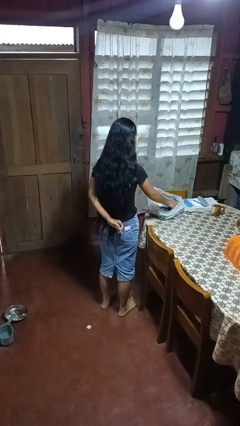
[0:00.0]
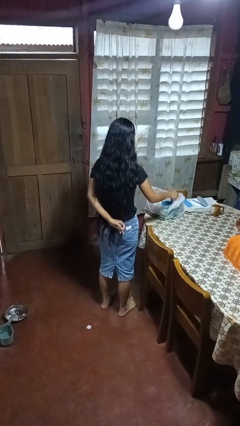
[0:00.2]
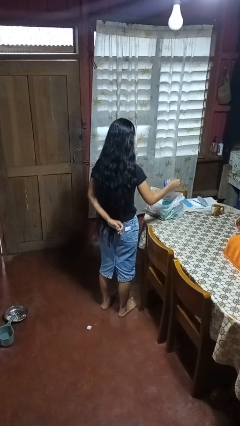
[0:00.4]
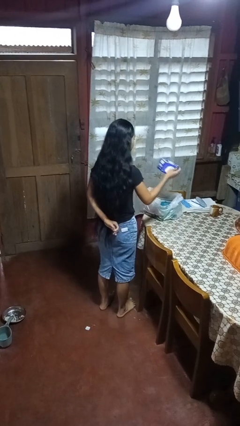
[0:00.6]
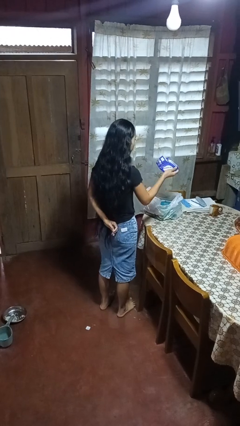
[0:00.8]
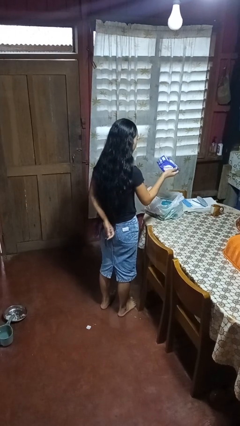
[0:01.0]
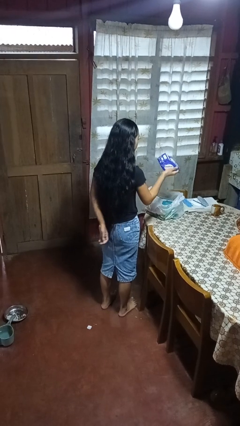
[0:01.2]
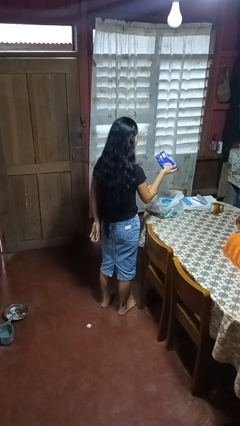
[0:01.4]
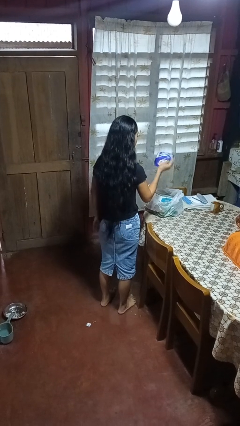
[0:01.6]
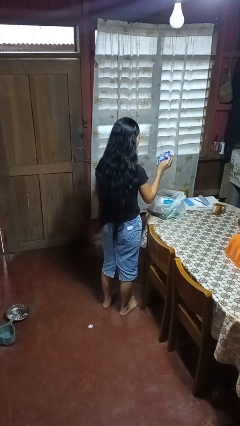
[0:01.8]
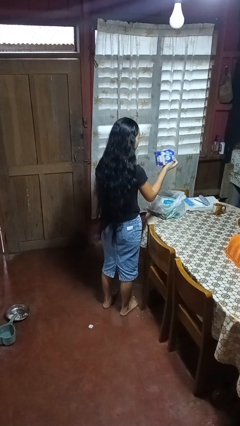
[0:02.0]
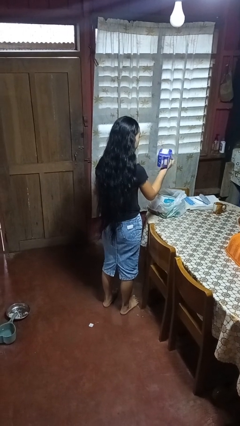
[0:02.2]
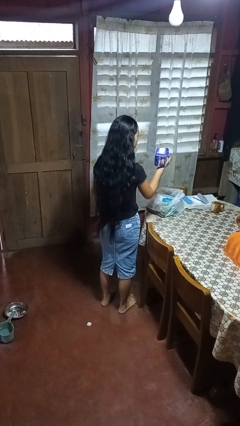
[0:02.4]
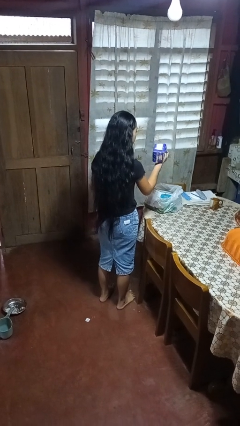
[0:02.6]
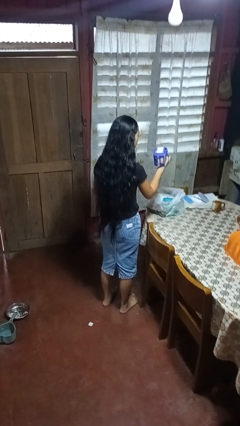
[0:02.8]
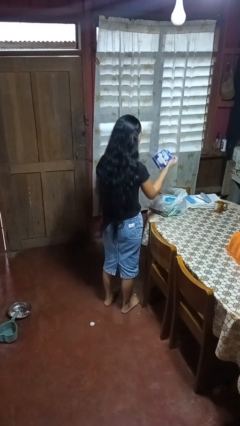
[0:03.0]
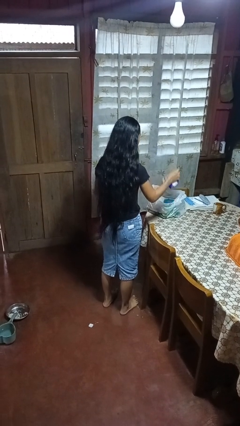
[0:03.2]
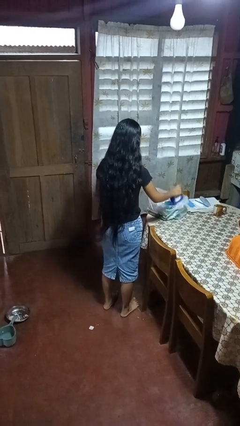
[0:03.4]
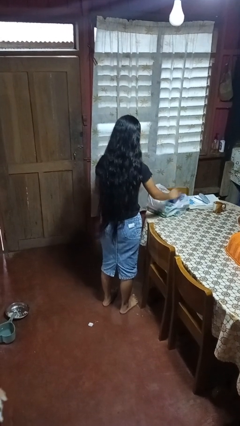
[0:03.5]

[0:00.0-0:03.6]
person takes object from bag

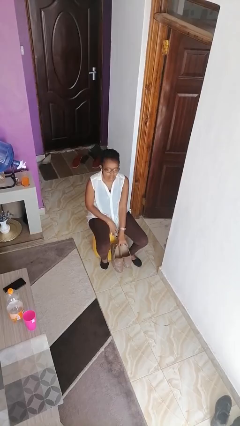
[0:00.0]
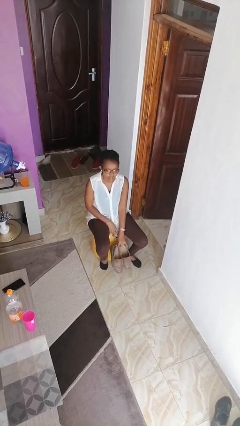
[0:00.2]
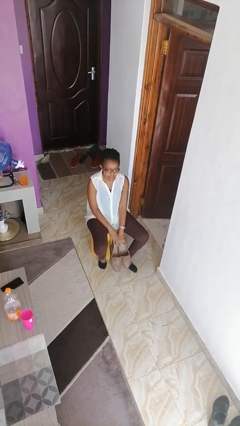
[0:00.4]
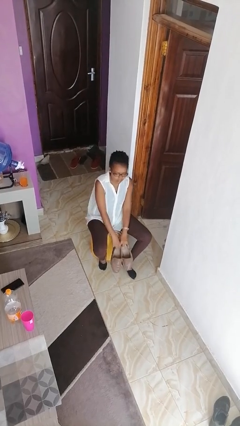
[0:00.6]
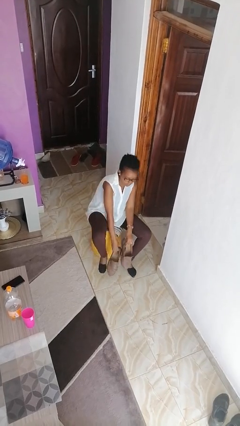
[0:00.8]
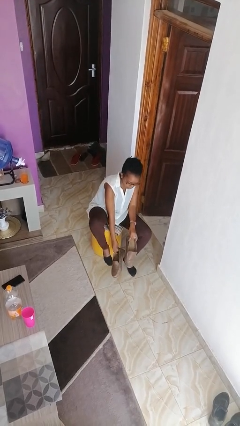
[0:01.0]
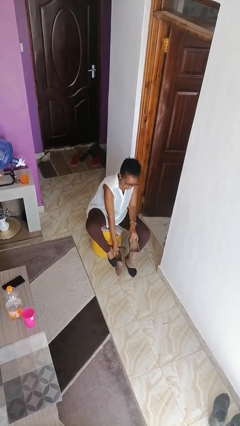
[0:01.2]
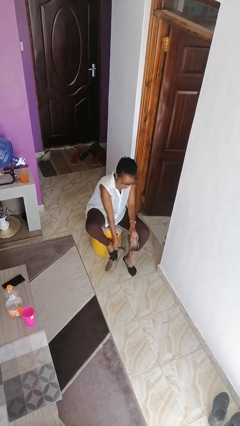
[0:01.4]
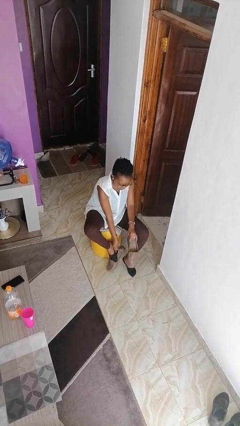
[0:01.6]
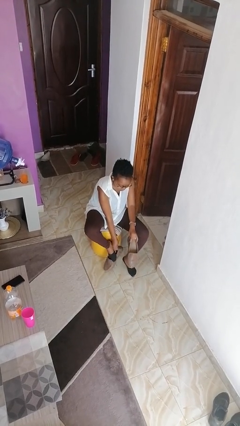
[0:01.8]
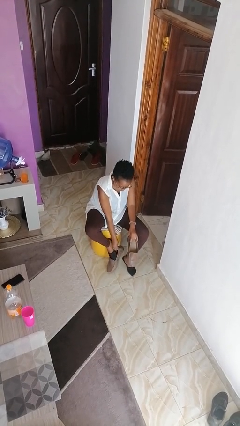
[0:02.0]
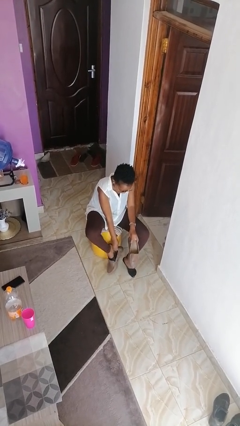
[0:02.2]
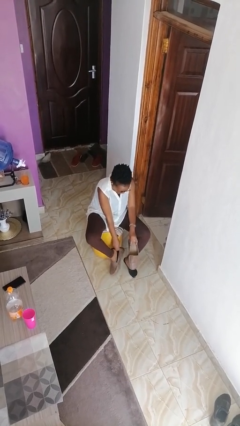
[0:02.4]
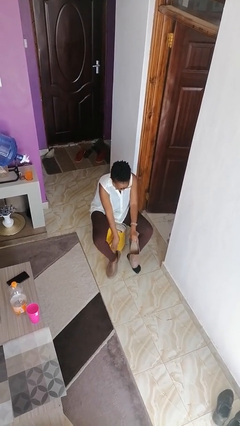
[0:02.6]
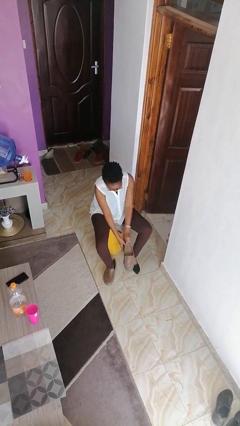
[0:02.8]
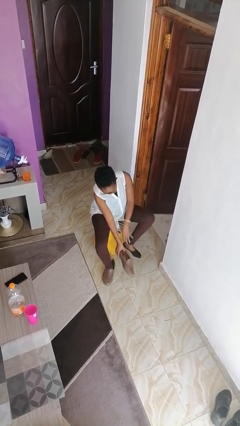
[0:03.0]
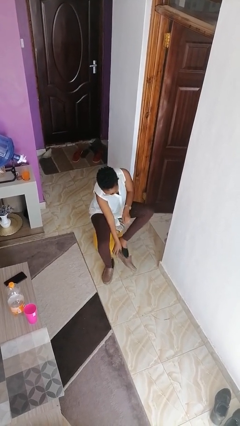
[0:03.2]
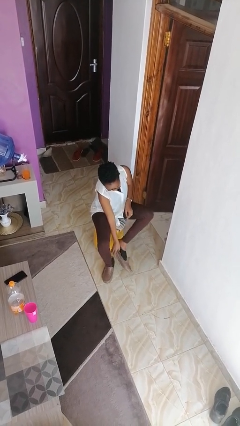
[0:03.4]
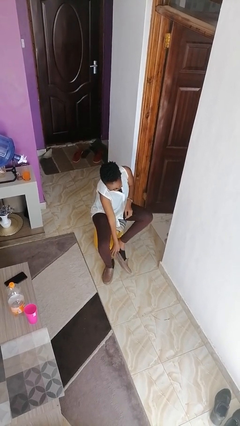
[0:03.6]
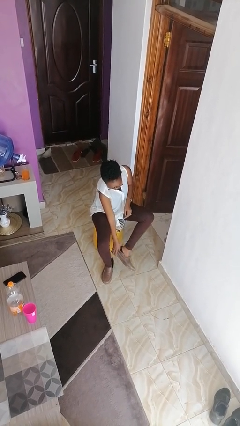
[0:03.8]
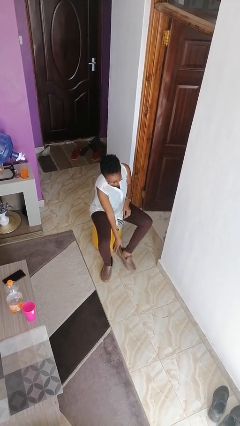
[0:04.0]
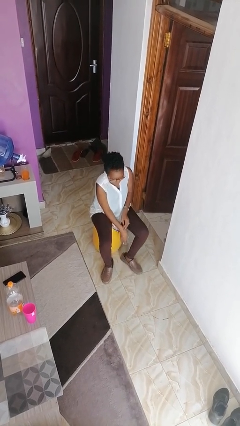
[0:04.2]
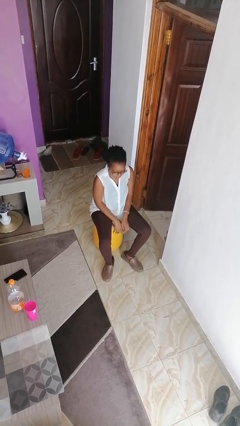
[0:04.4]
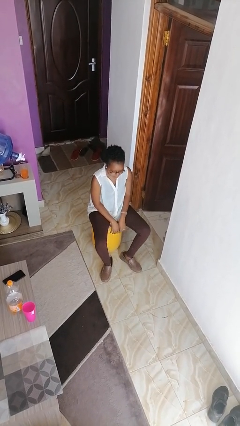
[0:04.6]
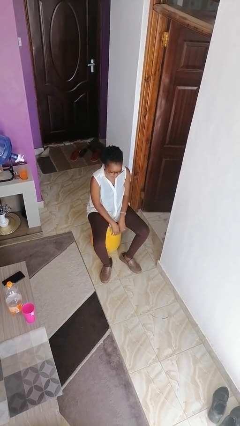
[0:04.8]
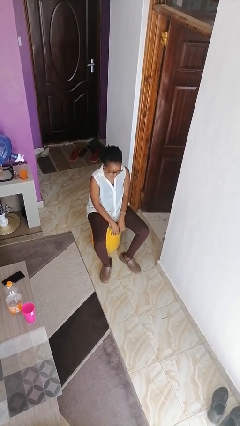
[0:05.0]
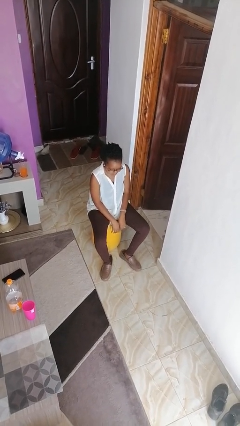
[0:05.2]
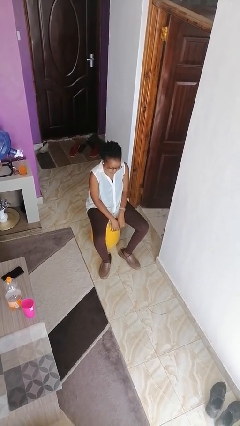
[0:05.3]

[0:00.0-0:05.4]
person puts on shoes

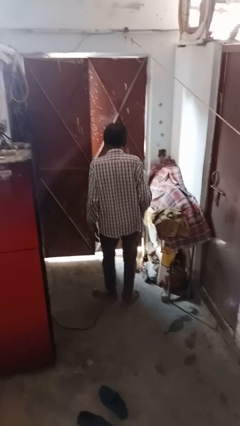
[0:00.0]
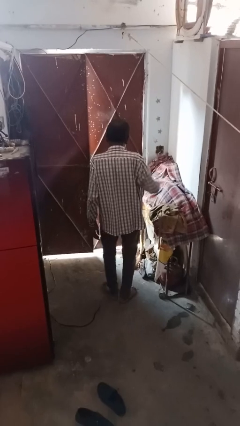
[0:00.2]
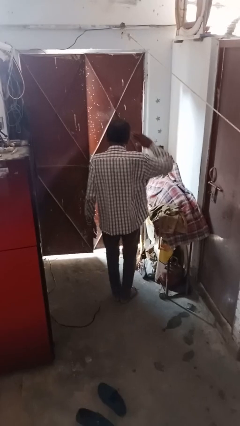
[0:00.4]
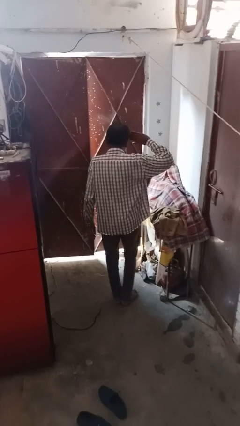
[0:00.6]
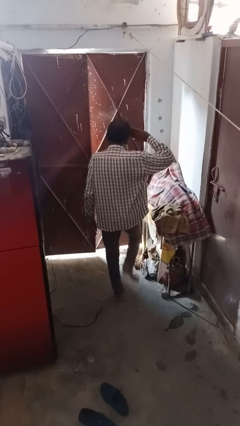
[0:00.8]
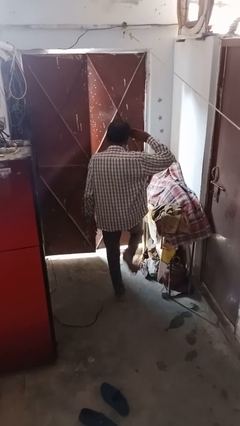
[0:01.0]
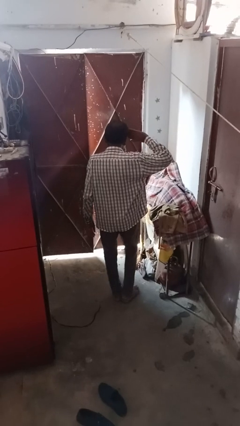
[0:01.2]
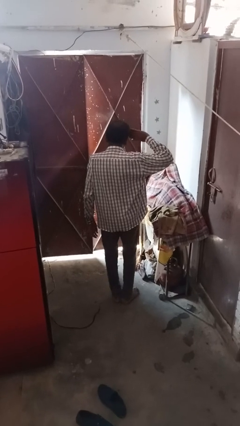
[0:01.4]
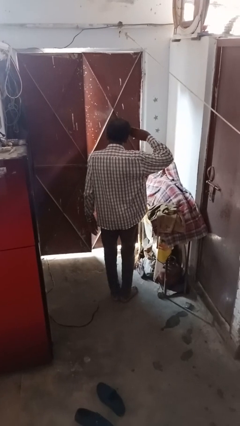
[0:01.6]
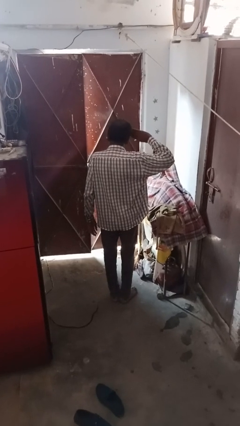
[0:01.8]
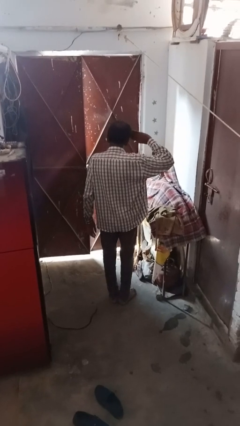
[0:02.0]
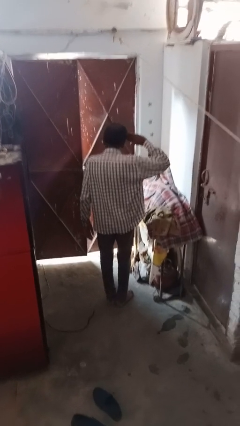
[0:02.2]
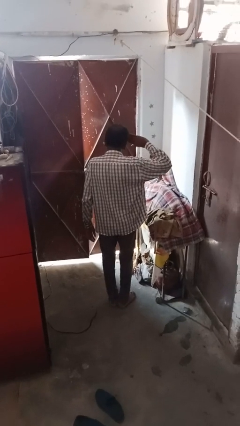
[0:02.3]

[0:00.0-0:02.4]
person salutes

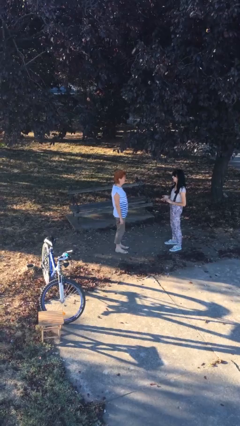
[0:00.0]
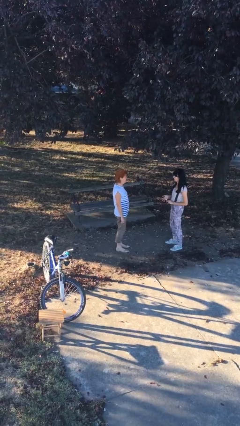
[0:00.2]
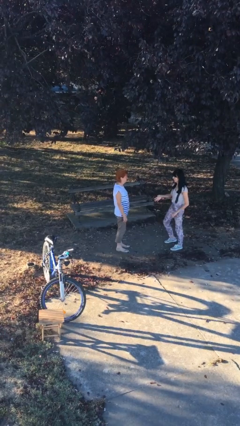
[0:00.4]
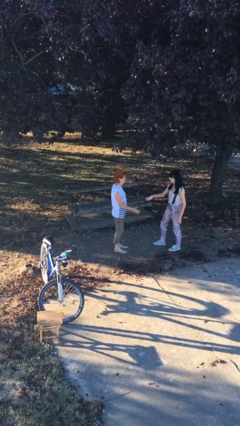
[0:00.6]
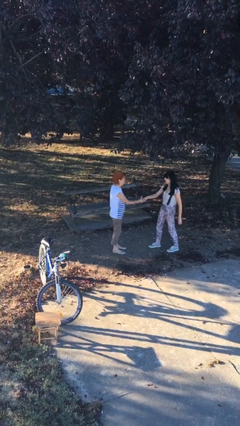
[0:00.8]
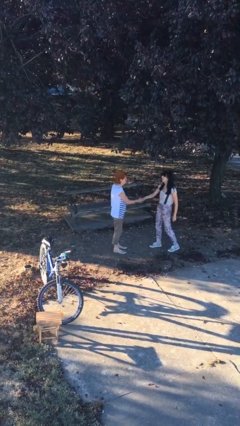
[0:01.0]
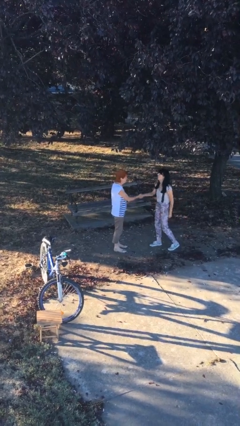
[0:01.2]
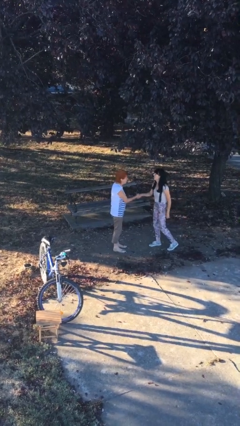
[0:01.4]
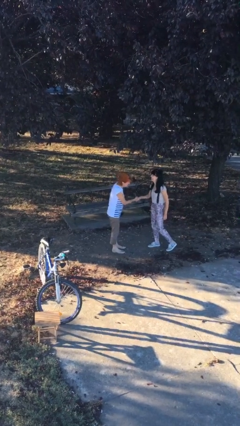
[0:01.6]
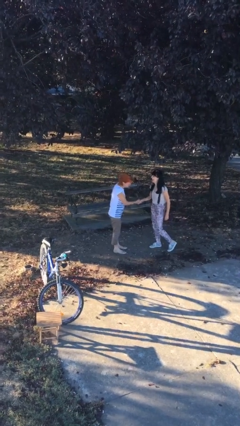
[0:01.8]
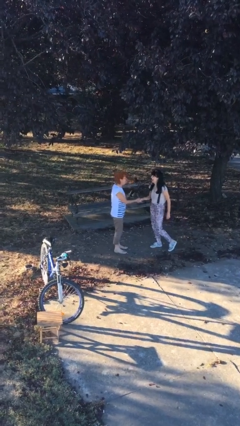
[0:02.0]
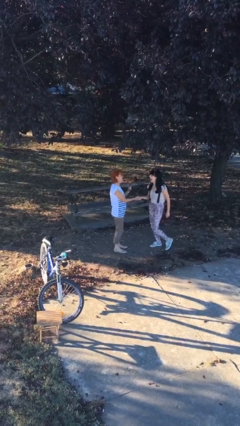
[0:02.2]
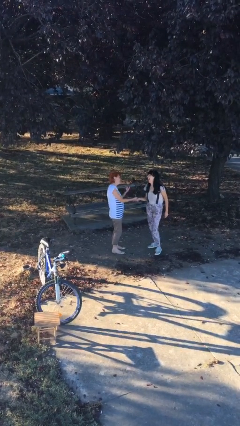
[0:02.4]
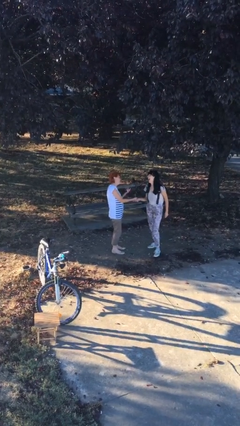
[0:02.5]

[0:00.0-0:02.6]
person shakes hand

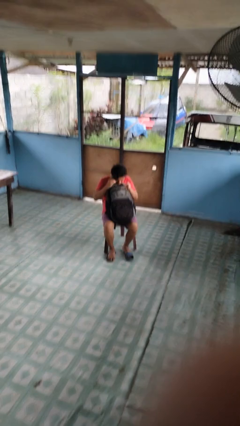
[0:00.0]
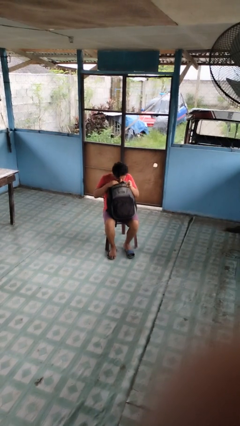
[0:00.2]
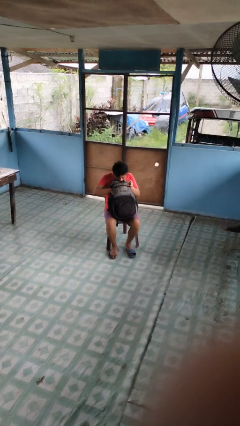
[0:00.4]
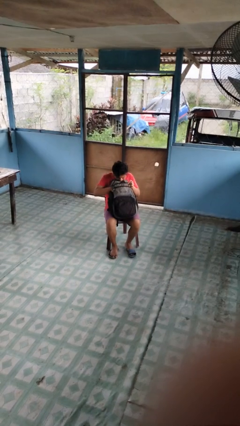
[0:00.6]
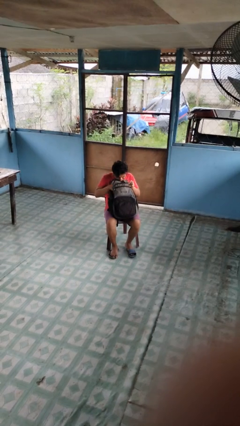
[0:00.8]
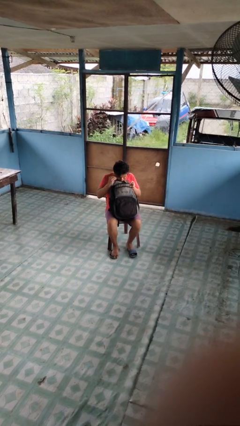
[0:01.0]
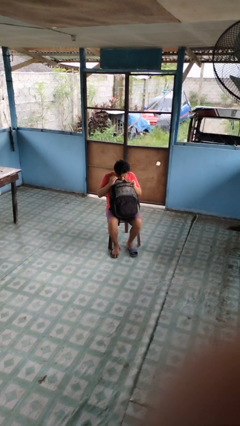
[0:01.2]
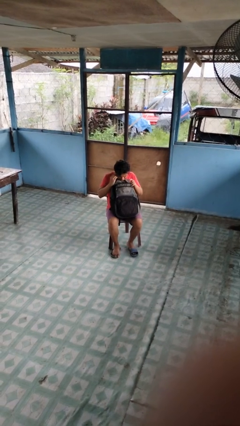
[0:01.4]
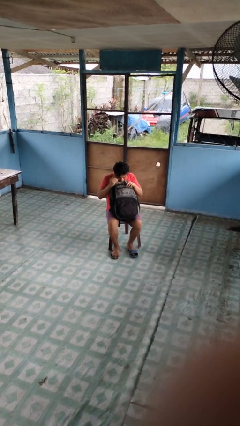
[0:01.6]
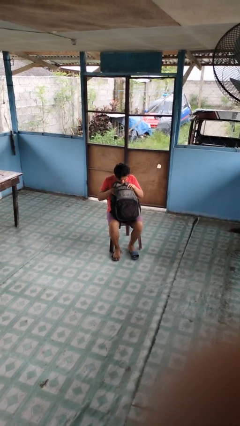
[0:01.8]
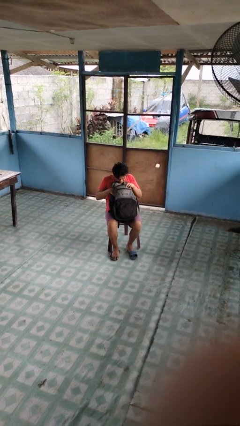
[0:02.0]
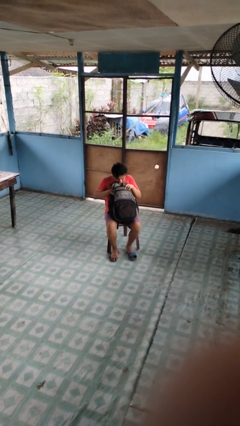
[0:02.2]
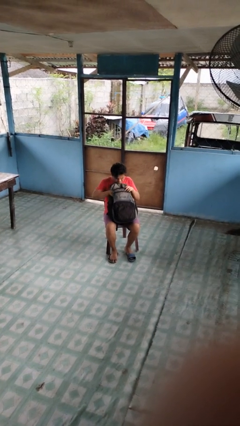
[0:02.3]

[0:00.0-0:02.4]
person searches in backpack

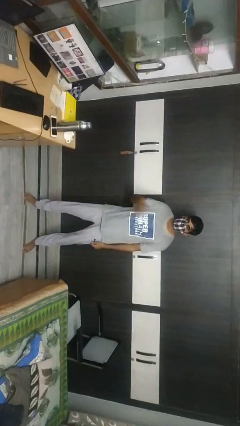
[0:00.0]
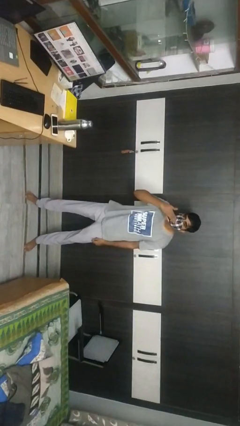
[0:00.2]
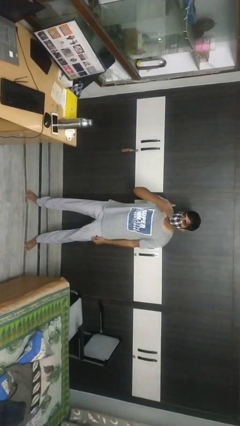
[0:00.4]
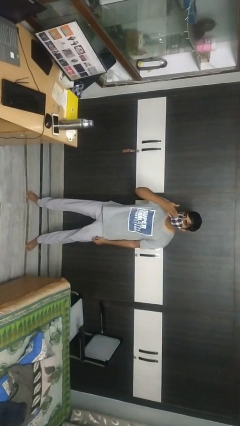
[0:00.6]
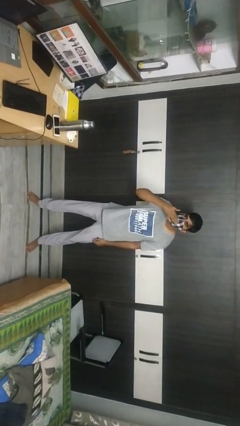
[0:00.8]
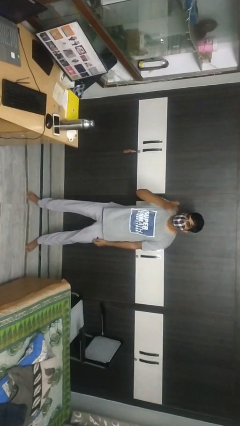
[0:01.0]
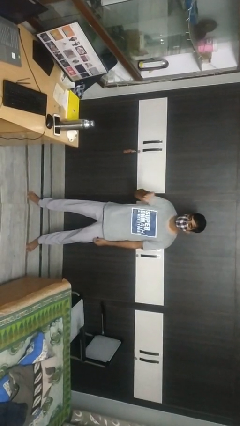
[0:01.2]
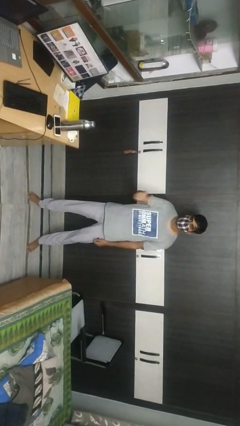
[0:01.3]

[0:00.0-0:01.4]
person gestures blow kiss
